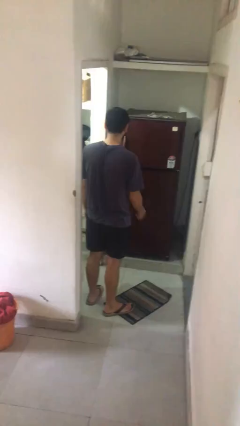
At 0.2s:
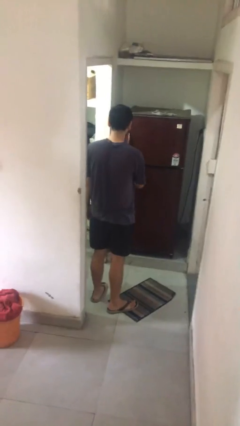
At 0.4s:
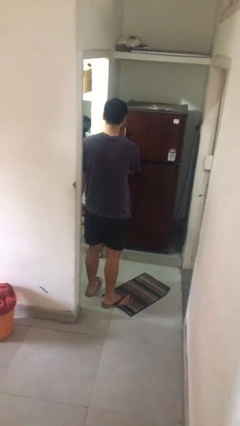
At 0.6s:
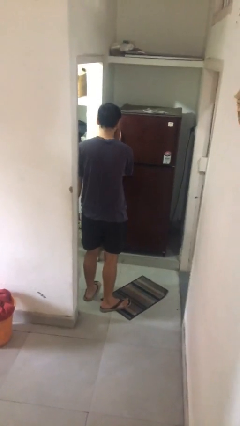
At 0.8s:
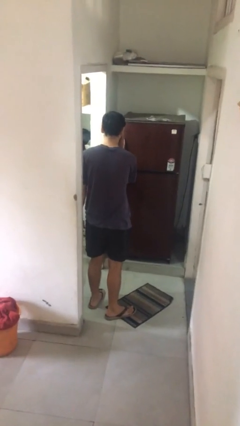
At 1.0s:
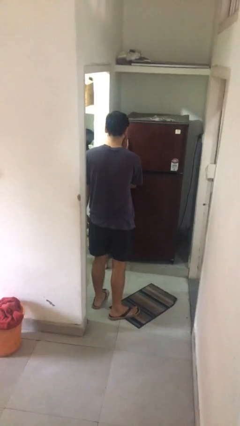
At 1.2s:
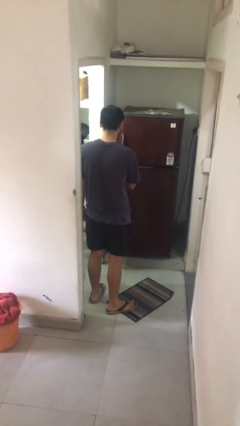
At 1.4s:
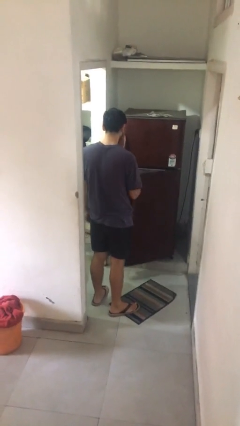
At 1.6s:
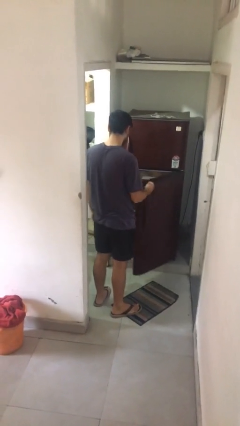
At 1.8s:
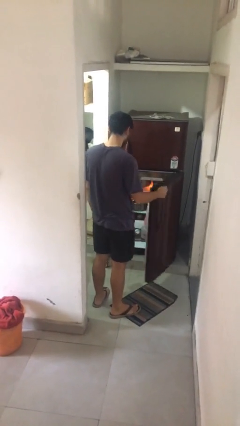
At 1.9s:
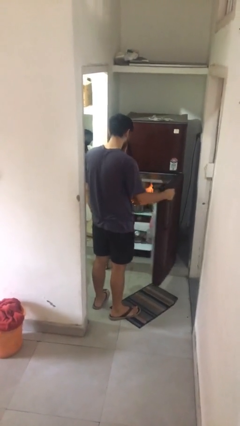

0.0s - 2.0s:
person opens refrigerator

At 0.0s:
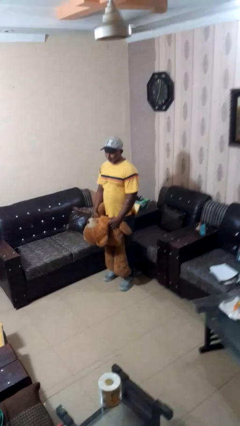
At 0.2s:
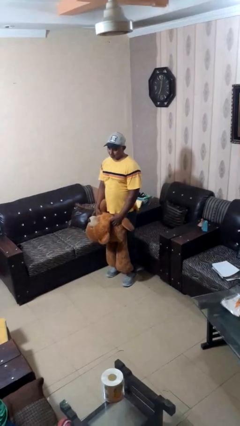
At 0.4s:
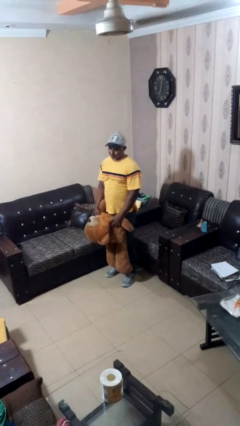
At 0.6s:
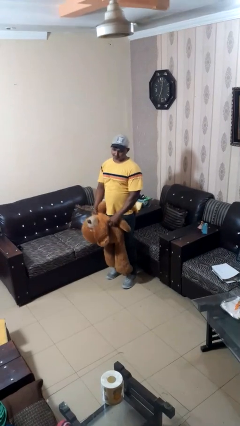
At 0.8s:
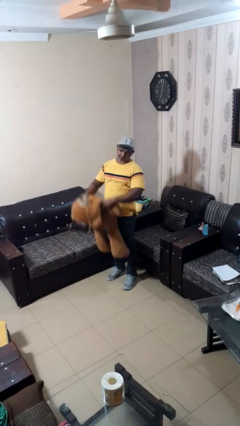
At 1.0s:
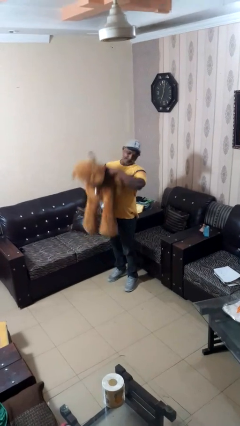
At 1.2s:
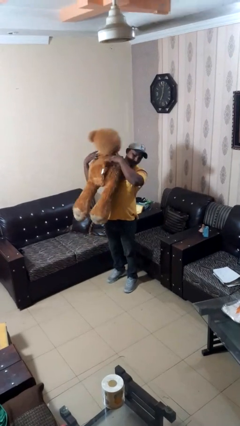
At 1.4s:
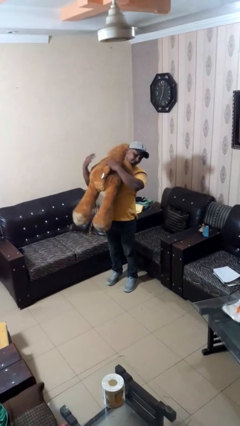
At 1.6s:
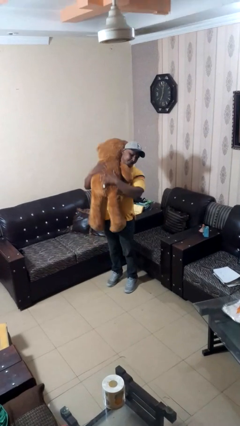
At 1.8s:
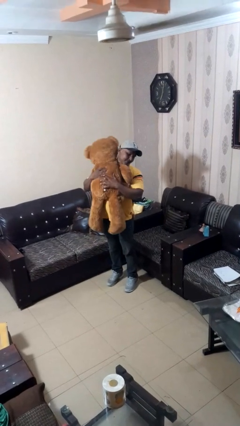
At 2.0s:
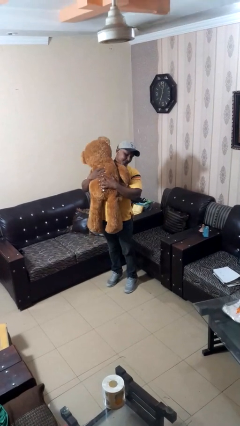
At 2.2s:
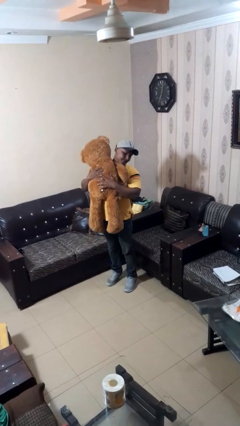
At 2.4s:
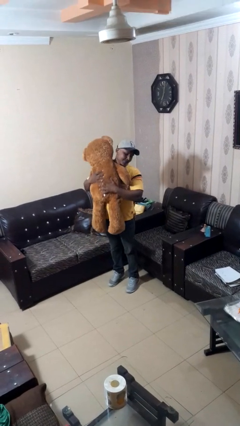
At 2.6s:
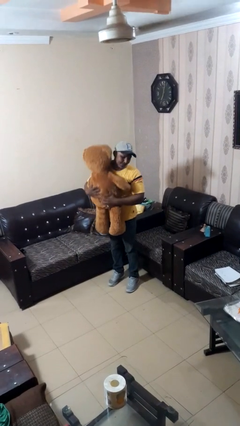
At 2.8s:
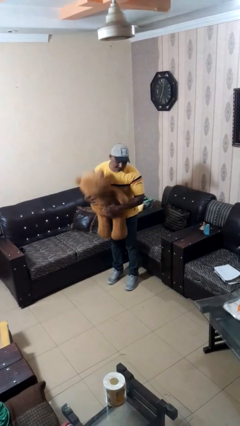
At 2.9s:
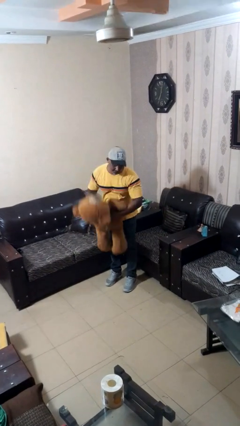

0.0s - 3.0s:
person hugs stuffed animal

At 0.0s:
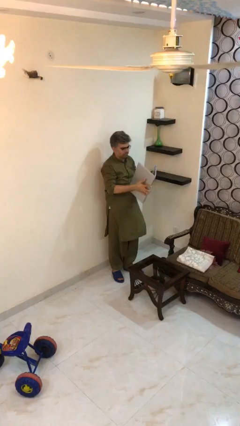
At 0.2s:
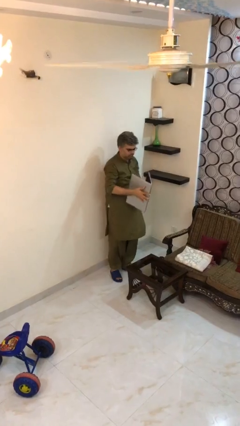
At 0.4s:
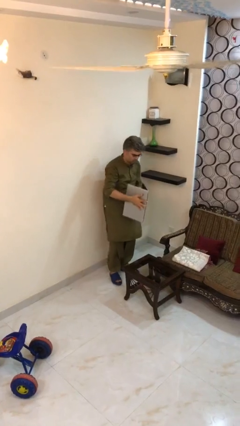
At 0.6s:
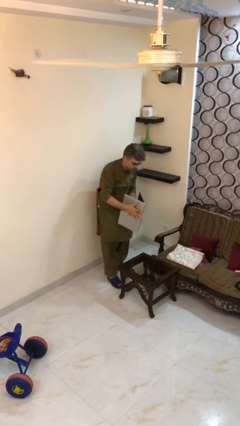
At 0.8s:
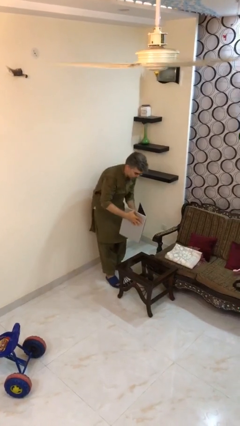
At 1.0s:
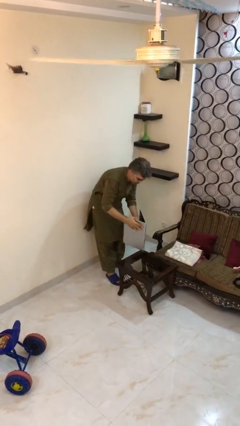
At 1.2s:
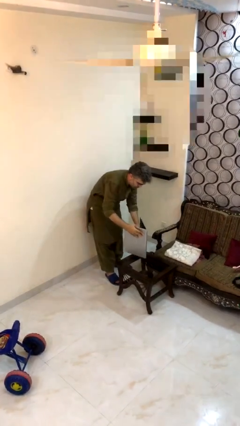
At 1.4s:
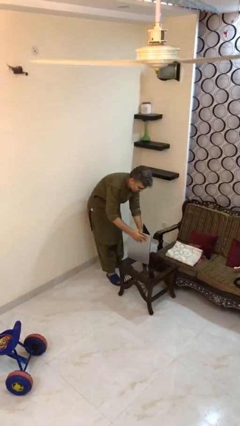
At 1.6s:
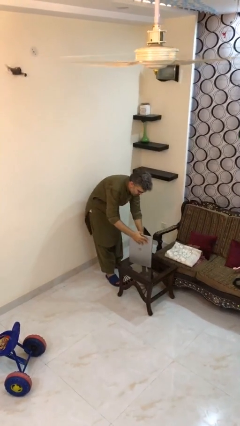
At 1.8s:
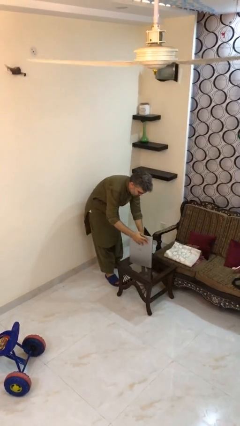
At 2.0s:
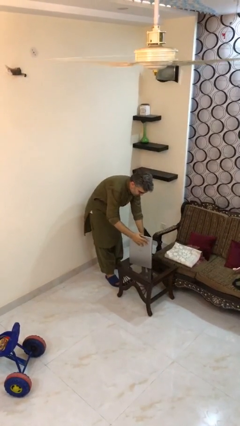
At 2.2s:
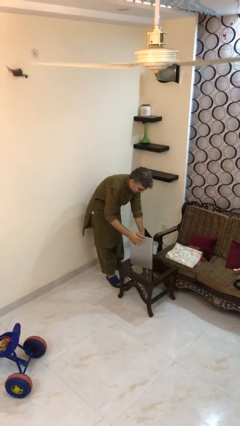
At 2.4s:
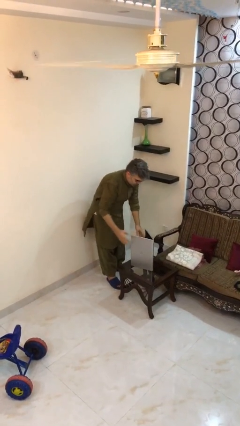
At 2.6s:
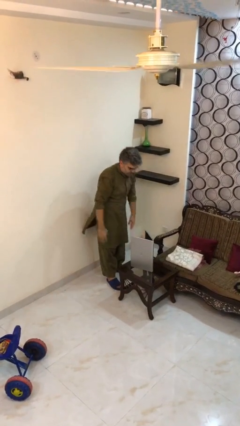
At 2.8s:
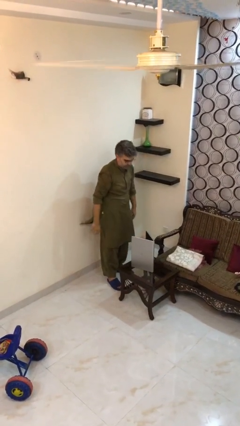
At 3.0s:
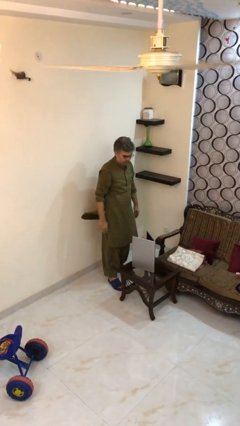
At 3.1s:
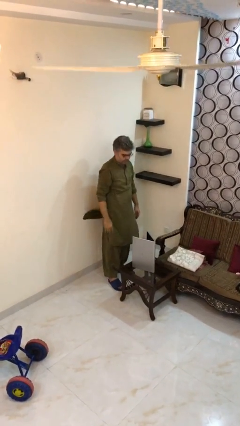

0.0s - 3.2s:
person puts down object on table

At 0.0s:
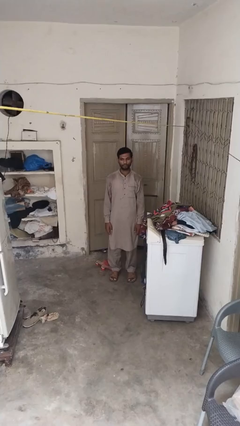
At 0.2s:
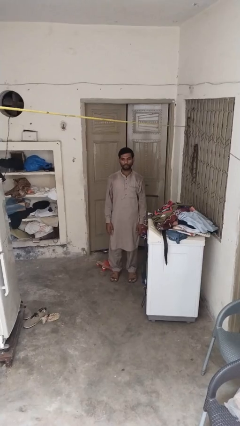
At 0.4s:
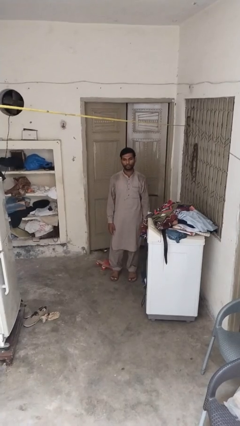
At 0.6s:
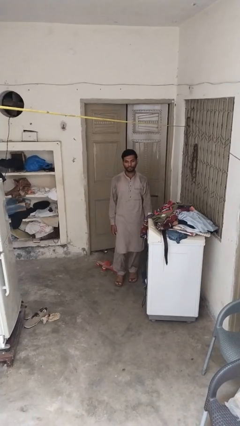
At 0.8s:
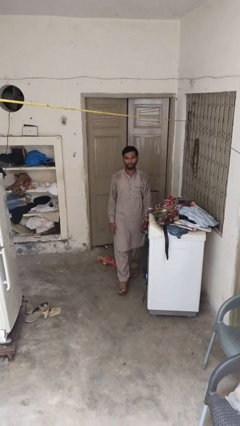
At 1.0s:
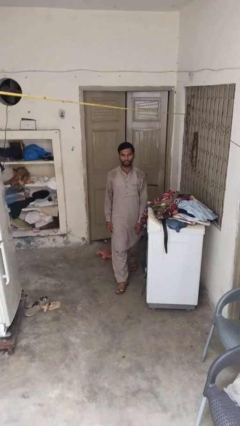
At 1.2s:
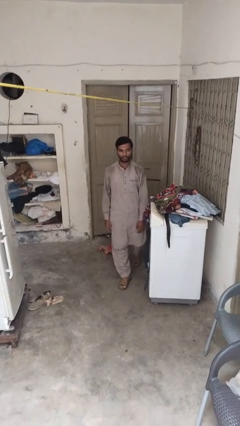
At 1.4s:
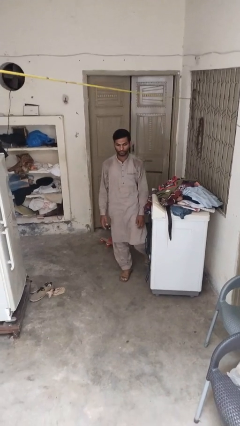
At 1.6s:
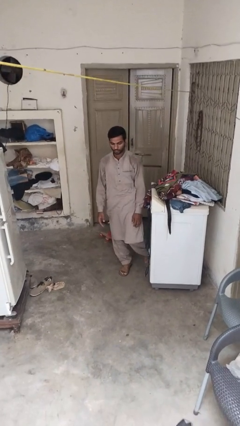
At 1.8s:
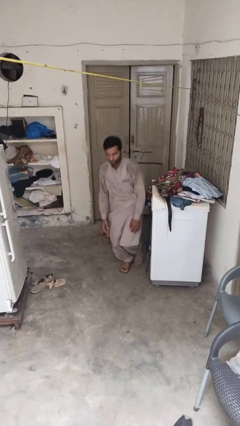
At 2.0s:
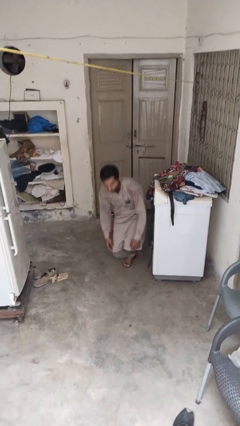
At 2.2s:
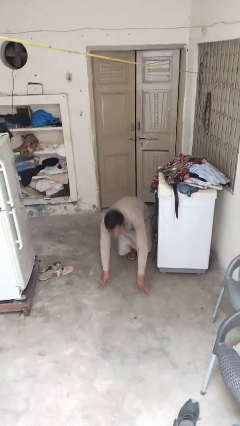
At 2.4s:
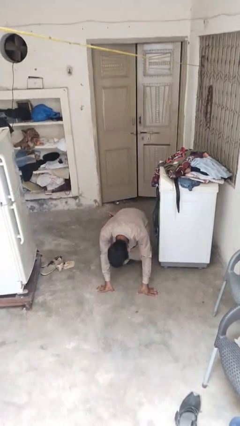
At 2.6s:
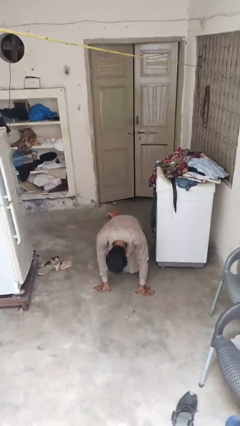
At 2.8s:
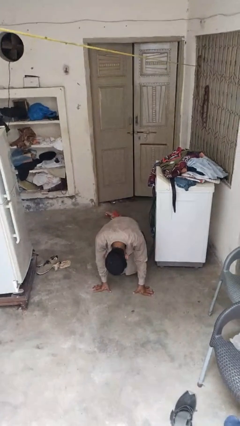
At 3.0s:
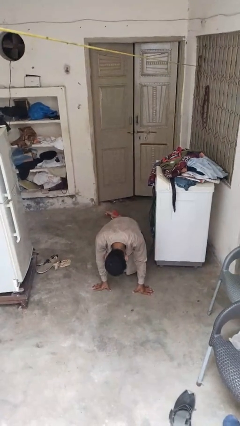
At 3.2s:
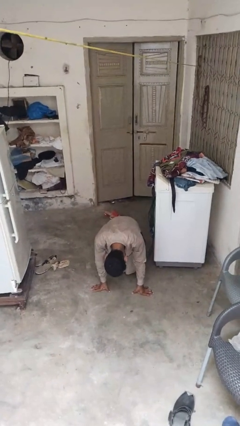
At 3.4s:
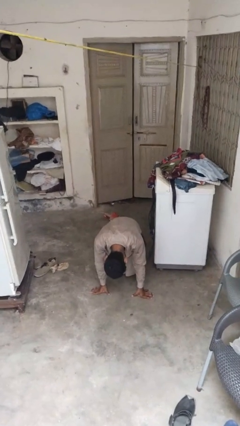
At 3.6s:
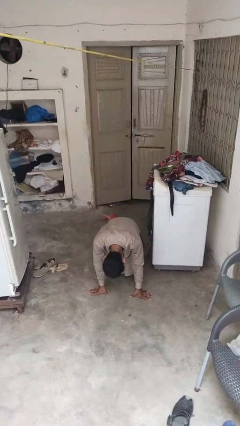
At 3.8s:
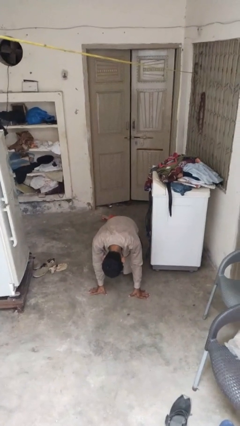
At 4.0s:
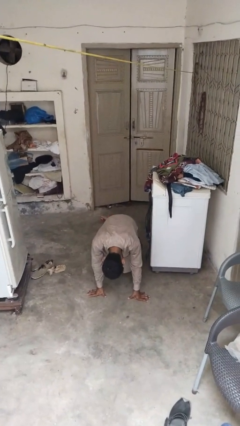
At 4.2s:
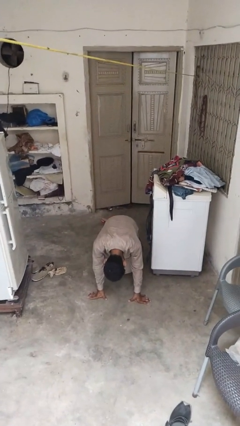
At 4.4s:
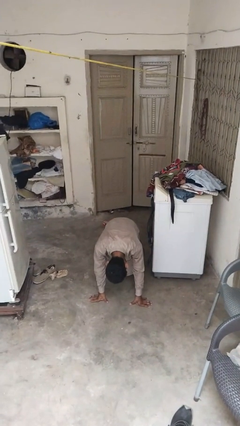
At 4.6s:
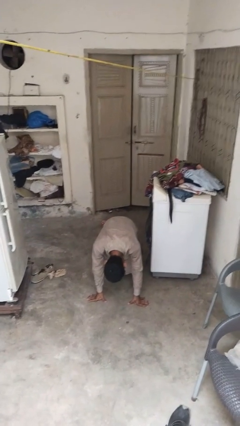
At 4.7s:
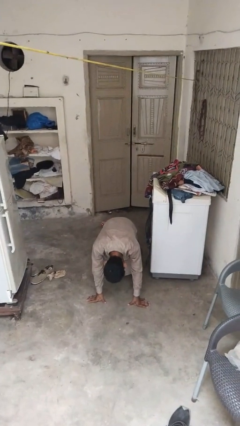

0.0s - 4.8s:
person trips on object on floor

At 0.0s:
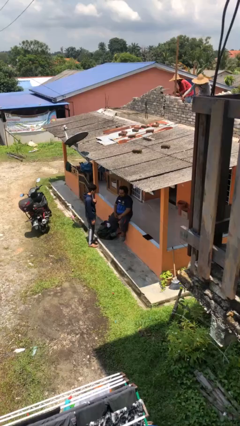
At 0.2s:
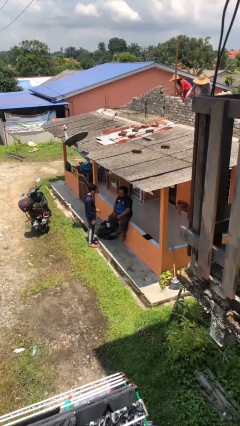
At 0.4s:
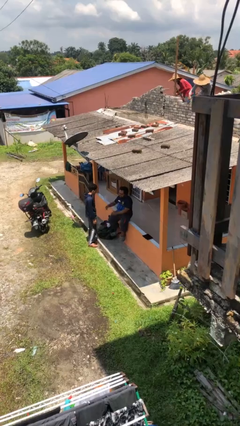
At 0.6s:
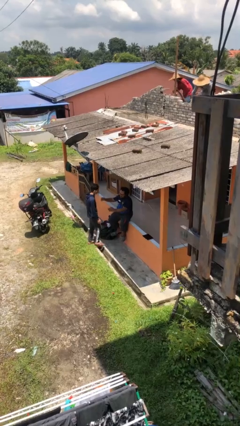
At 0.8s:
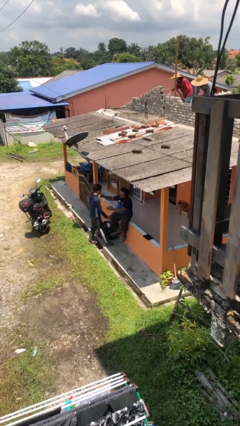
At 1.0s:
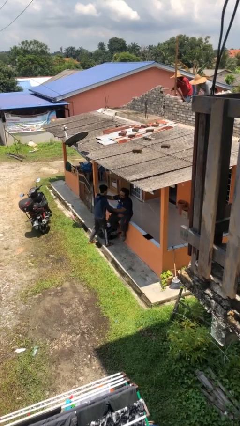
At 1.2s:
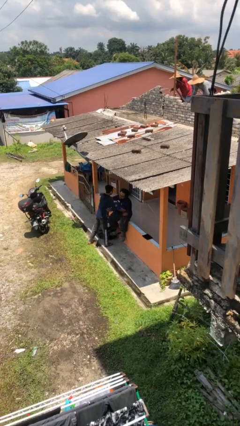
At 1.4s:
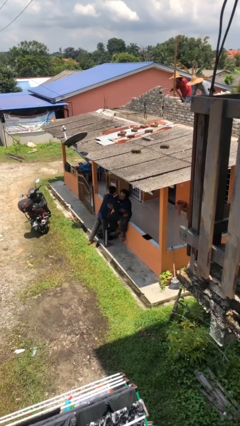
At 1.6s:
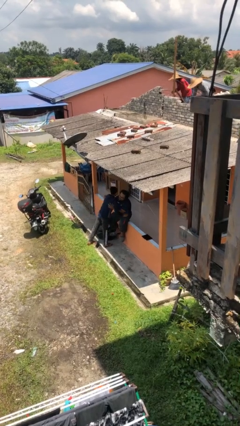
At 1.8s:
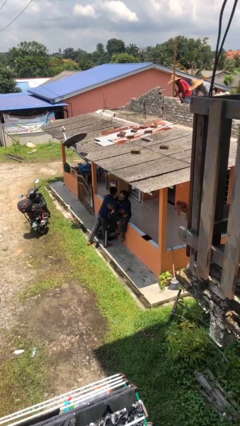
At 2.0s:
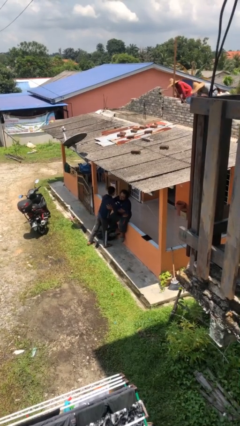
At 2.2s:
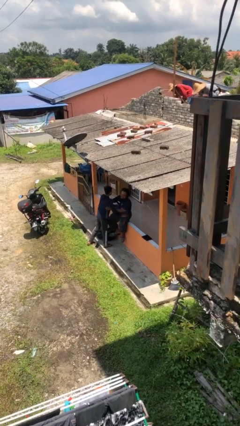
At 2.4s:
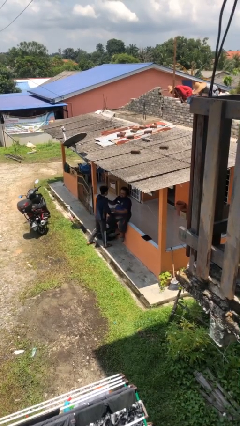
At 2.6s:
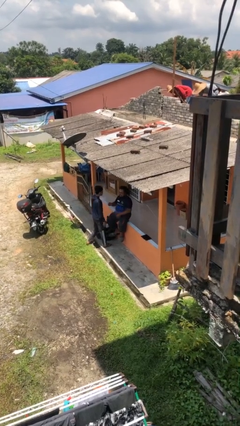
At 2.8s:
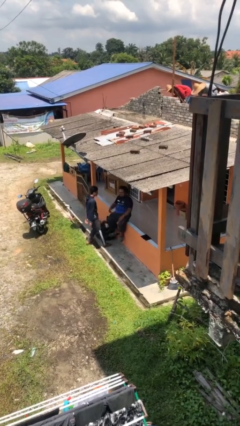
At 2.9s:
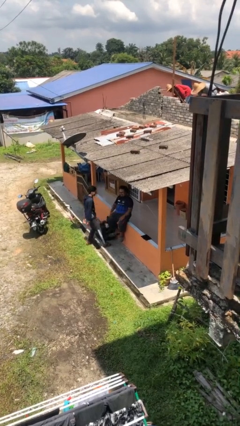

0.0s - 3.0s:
person embraces person

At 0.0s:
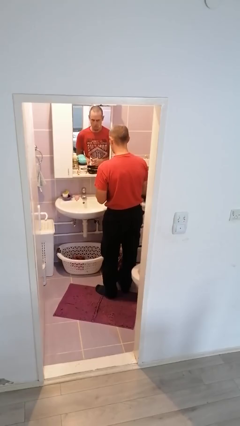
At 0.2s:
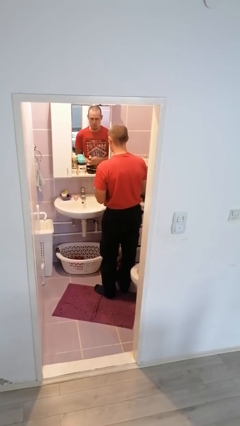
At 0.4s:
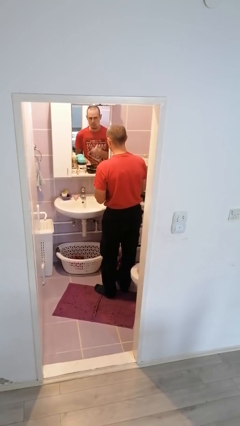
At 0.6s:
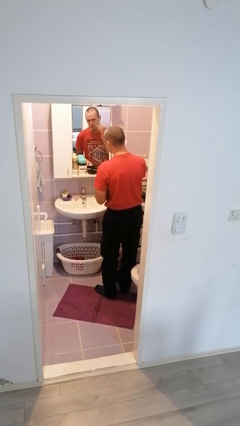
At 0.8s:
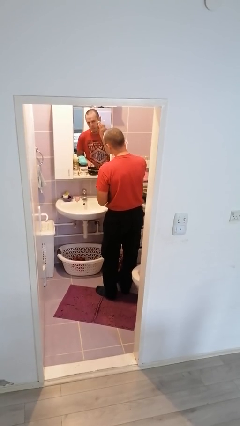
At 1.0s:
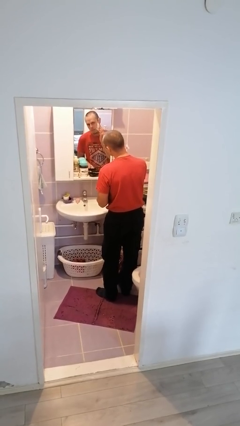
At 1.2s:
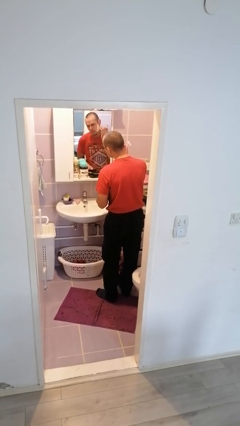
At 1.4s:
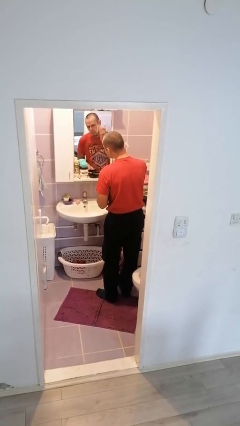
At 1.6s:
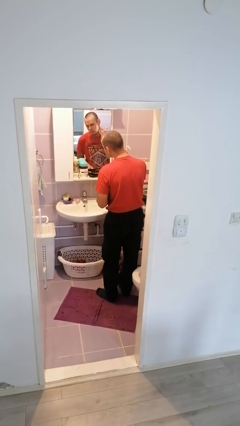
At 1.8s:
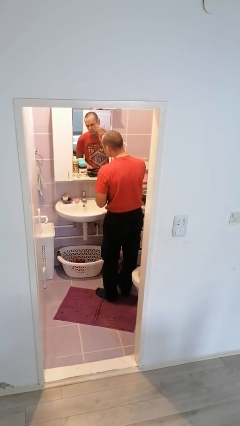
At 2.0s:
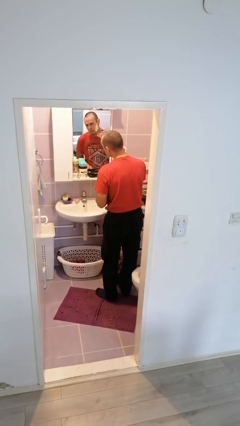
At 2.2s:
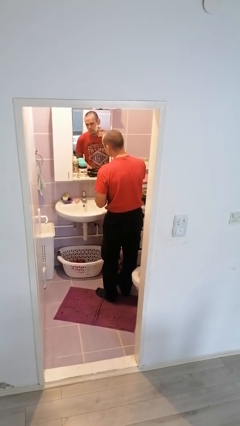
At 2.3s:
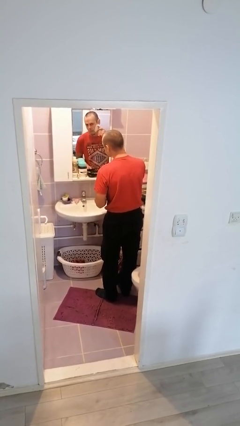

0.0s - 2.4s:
person applies shaving cream
